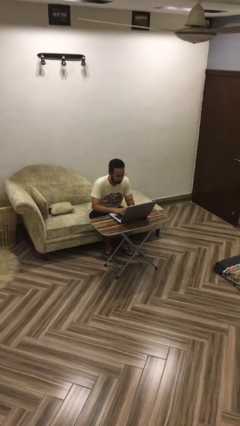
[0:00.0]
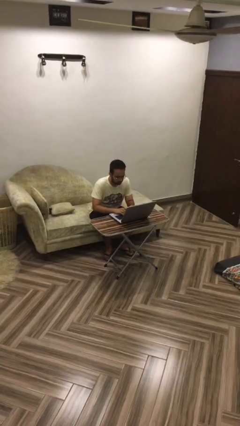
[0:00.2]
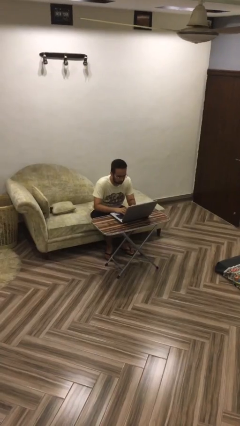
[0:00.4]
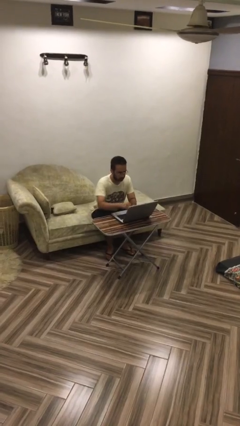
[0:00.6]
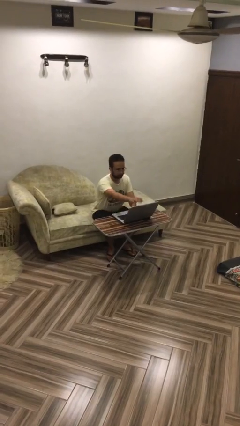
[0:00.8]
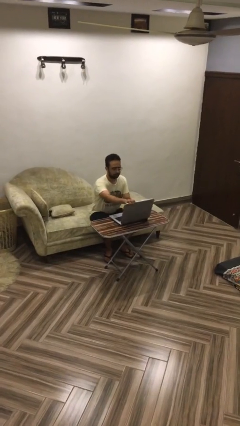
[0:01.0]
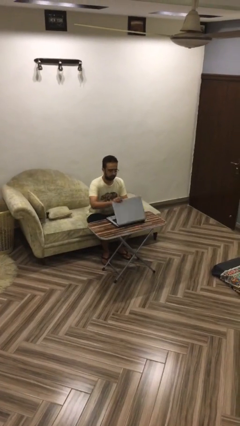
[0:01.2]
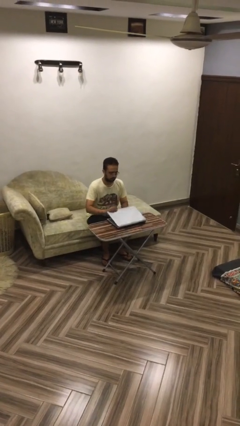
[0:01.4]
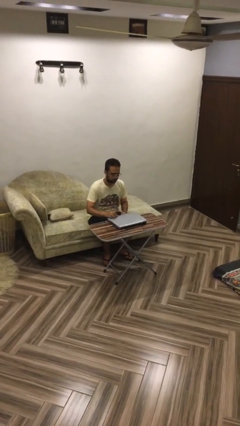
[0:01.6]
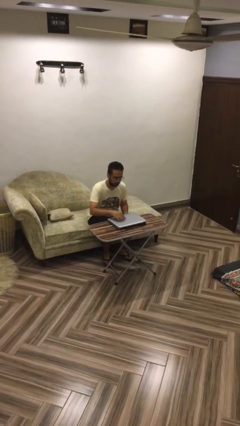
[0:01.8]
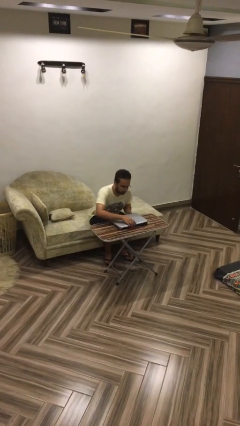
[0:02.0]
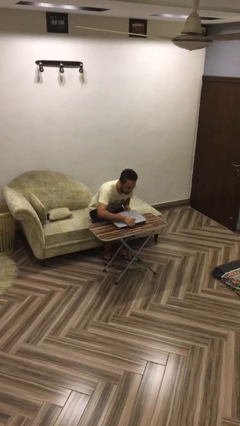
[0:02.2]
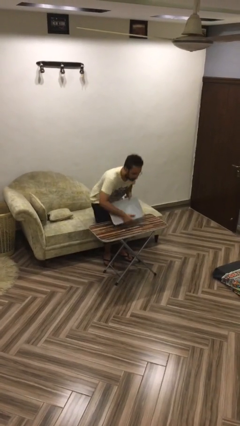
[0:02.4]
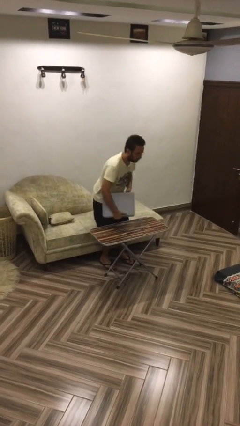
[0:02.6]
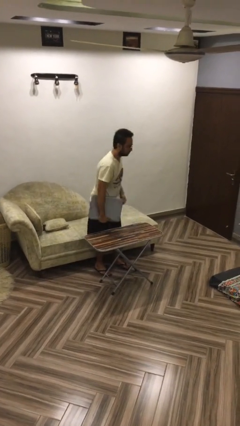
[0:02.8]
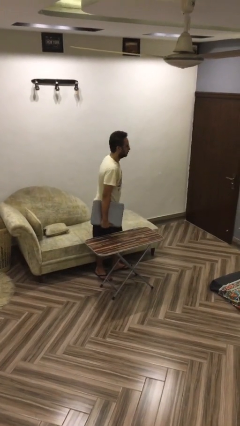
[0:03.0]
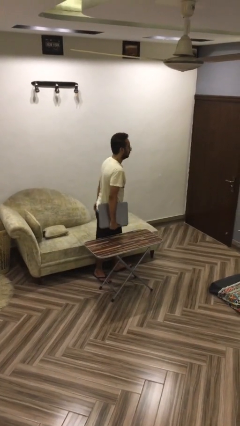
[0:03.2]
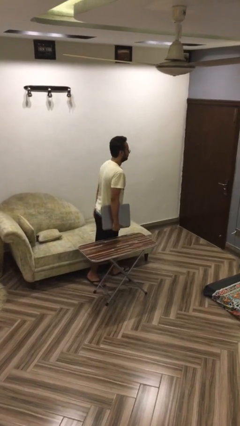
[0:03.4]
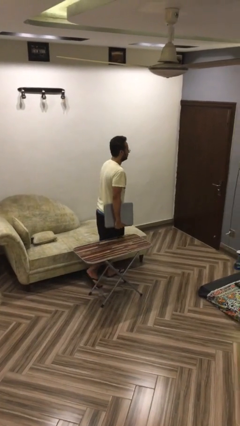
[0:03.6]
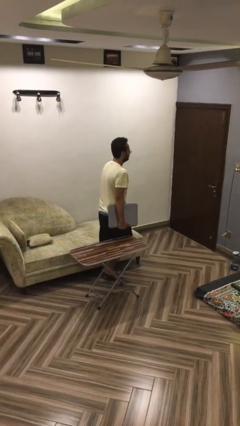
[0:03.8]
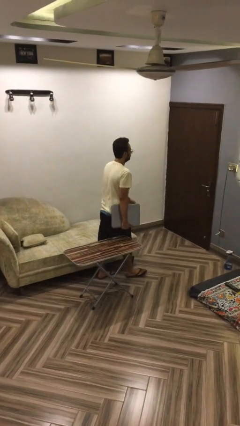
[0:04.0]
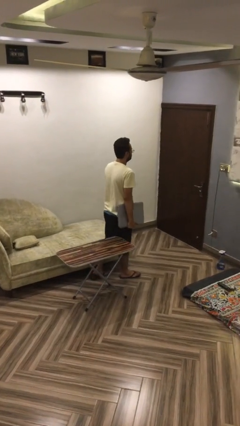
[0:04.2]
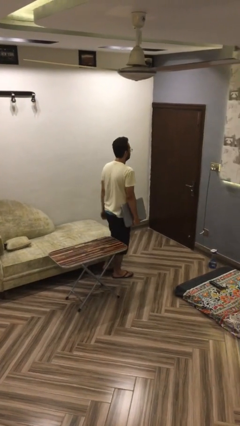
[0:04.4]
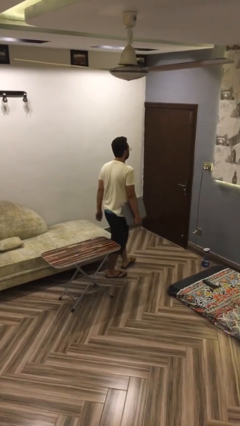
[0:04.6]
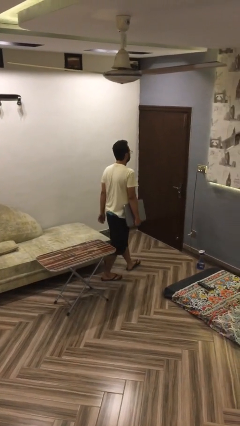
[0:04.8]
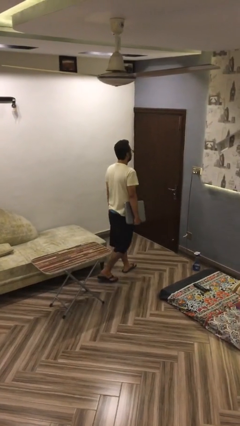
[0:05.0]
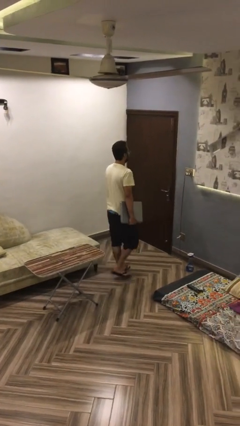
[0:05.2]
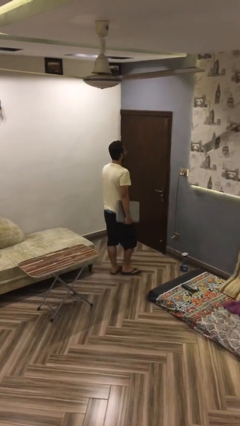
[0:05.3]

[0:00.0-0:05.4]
person stands up

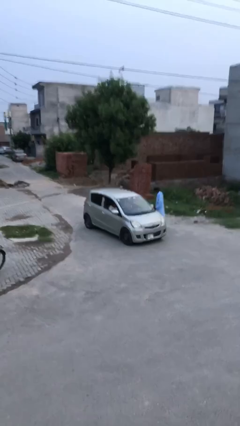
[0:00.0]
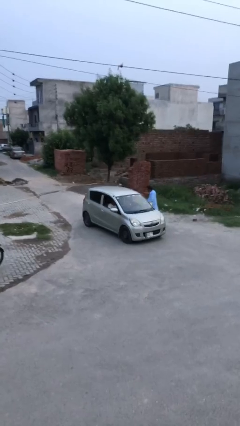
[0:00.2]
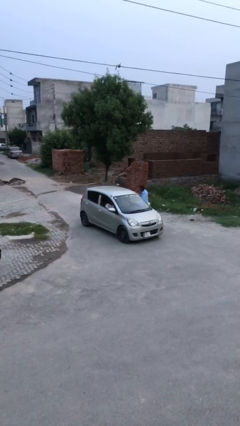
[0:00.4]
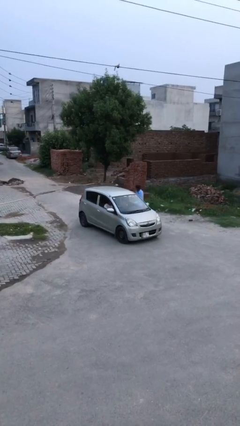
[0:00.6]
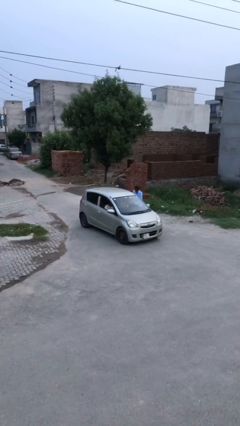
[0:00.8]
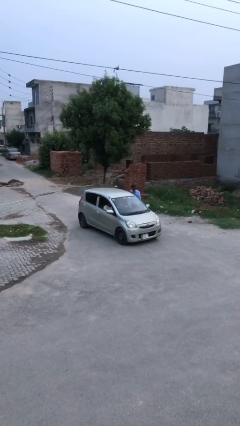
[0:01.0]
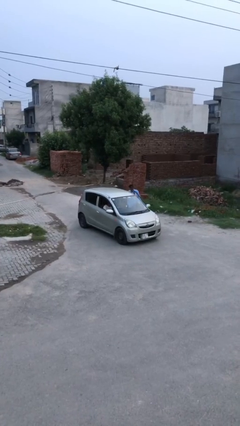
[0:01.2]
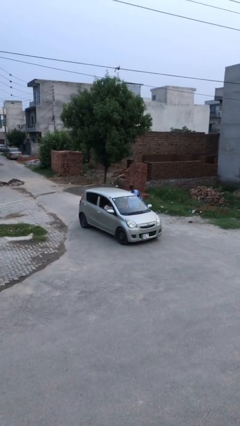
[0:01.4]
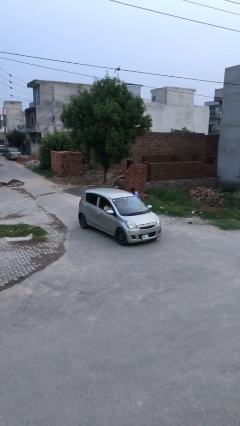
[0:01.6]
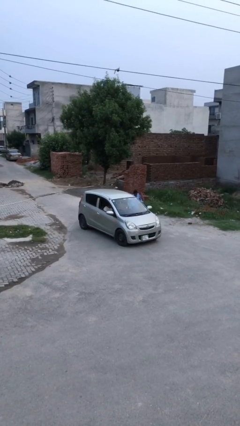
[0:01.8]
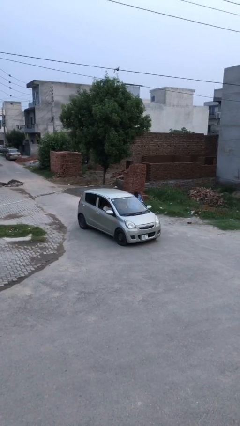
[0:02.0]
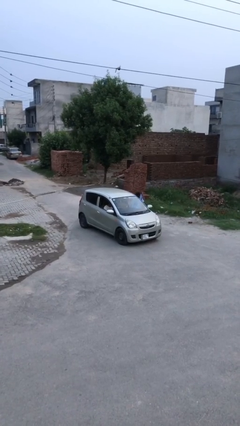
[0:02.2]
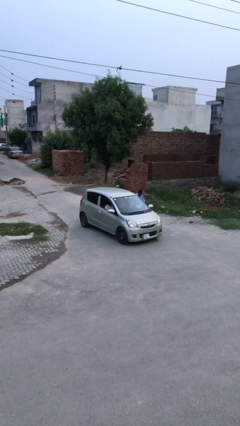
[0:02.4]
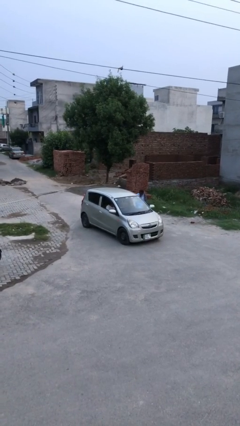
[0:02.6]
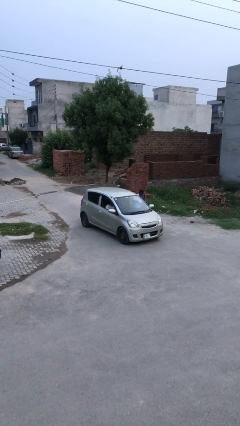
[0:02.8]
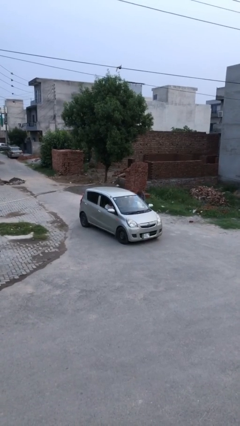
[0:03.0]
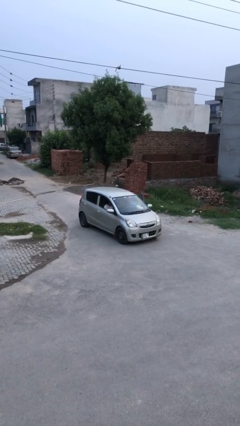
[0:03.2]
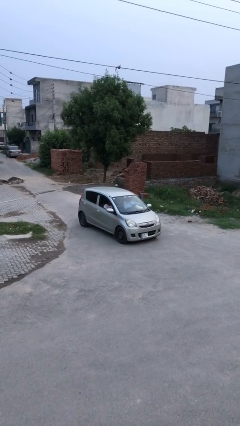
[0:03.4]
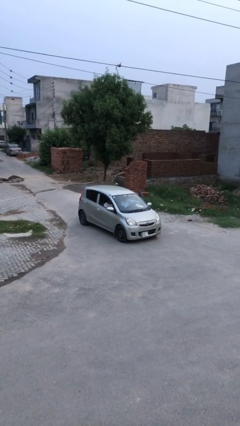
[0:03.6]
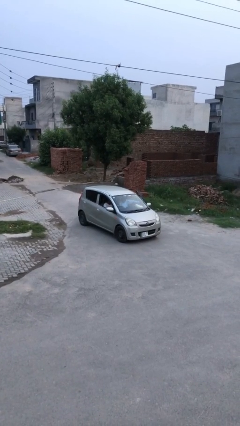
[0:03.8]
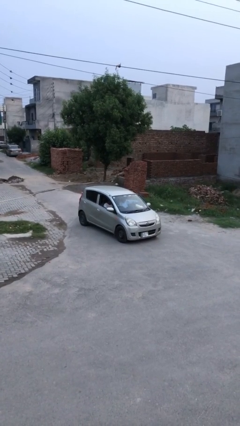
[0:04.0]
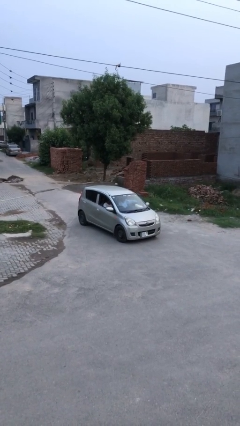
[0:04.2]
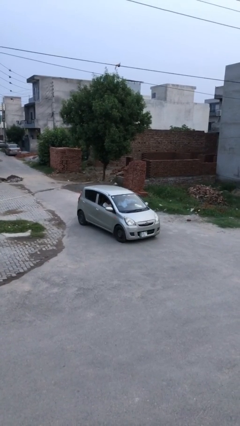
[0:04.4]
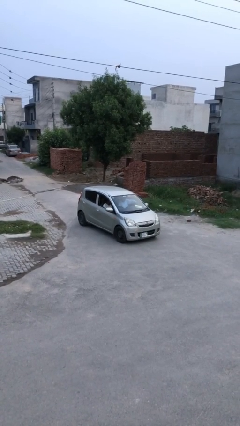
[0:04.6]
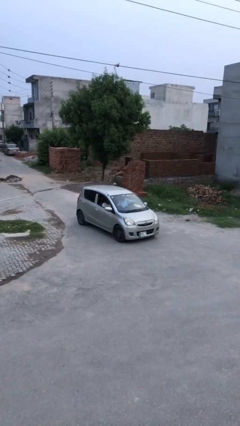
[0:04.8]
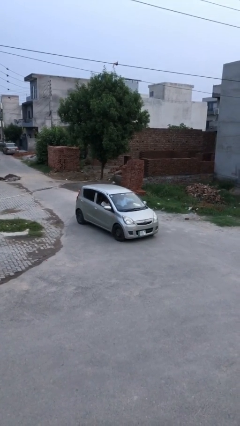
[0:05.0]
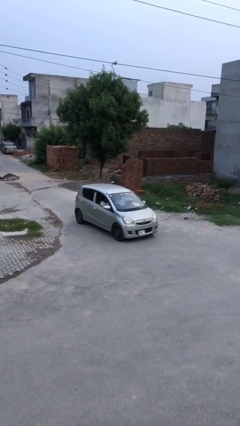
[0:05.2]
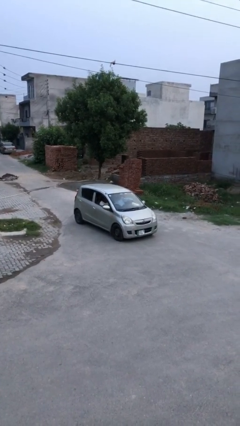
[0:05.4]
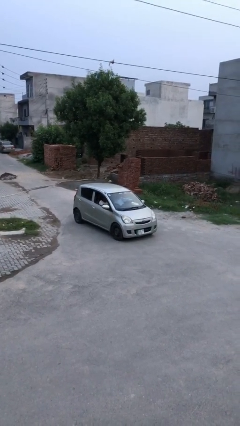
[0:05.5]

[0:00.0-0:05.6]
car picks up person

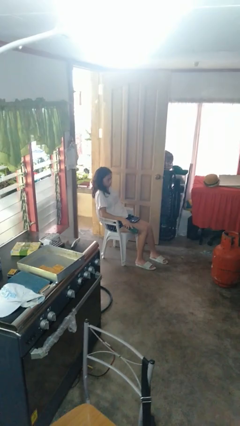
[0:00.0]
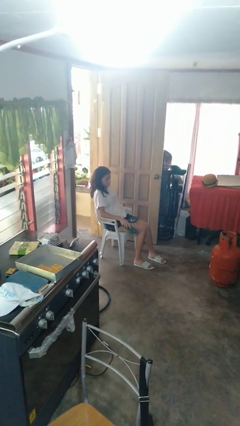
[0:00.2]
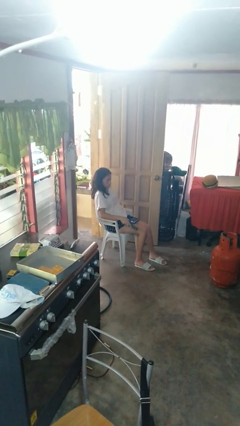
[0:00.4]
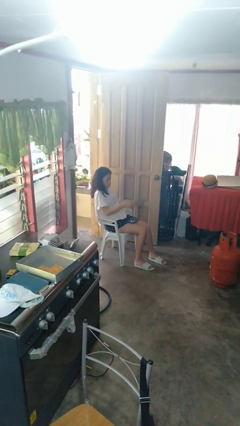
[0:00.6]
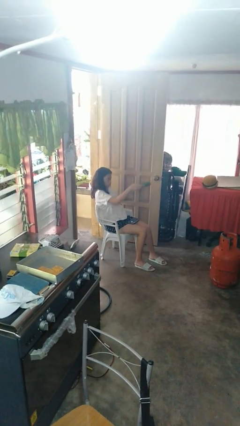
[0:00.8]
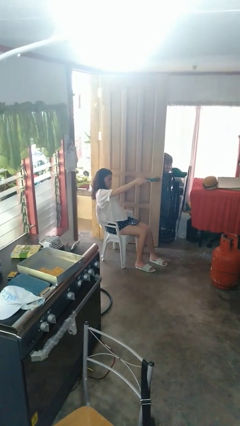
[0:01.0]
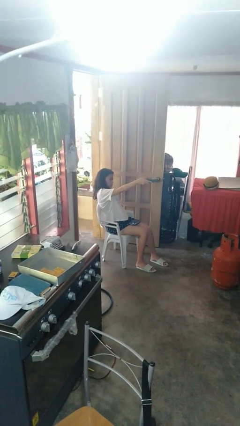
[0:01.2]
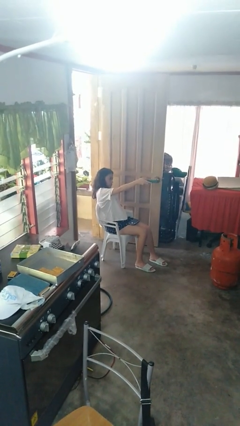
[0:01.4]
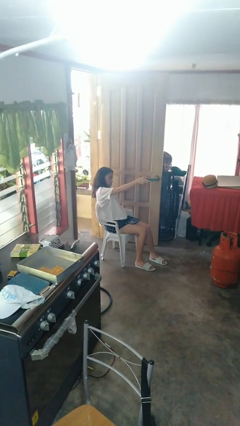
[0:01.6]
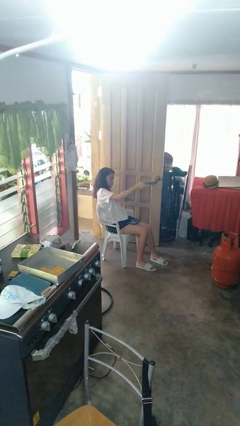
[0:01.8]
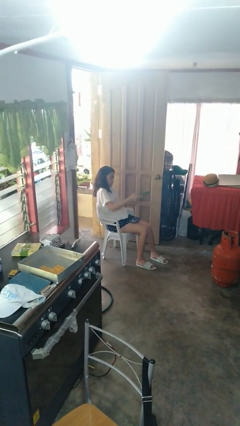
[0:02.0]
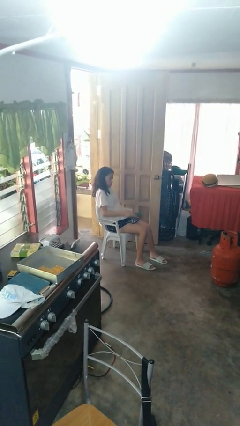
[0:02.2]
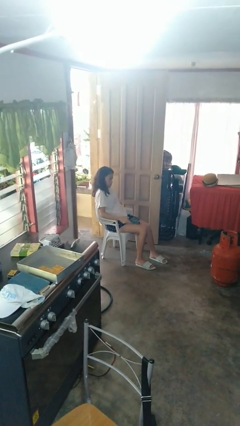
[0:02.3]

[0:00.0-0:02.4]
person uses television remote

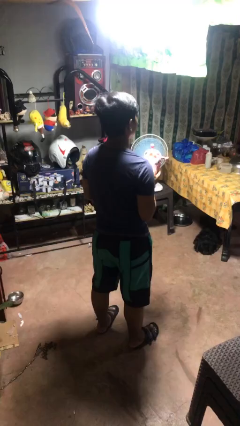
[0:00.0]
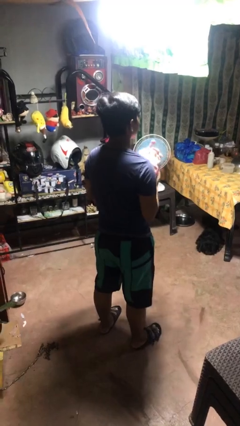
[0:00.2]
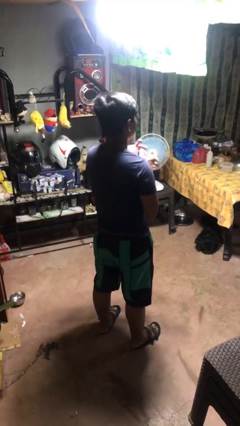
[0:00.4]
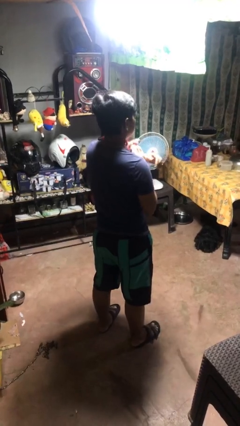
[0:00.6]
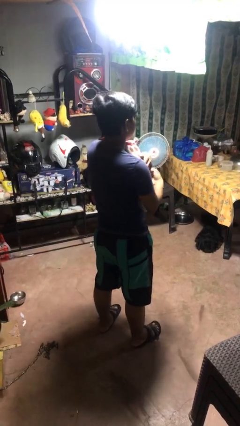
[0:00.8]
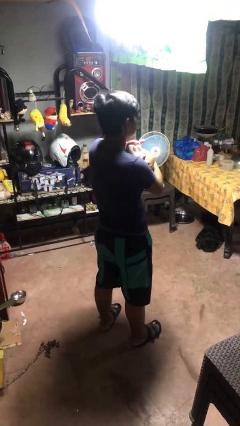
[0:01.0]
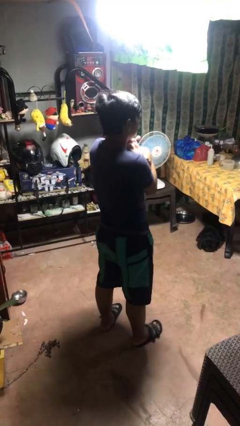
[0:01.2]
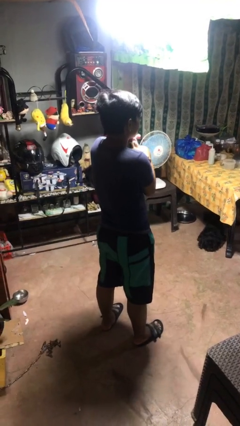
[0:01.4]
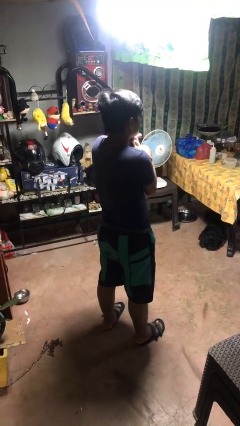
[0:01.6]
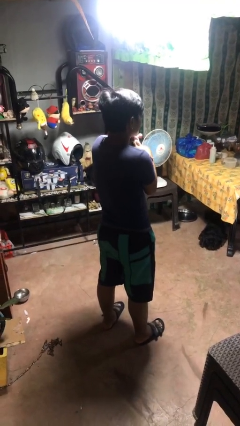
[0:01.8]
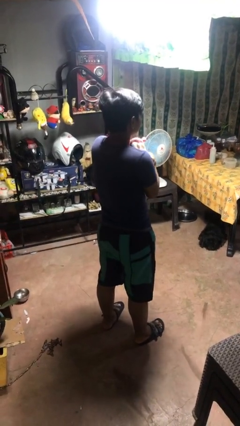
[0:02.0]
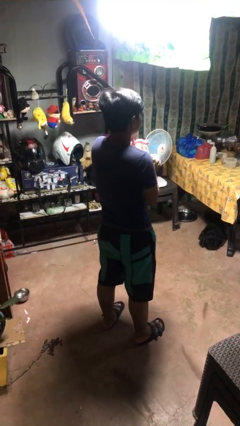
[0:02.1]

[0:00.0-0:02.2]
person hugs stuffed animal

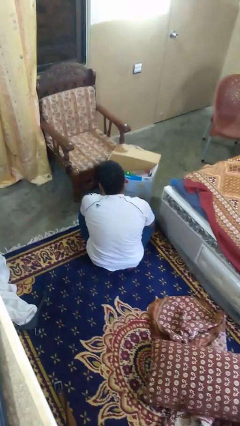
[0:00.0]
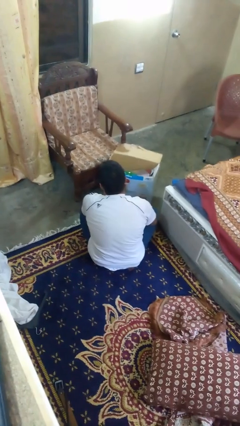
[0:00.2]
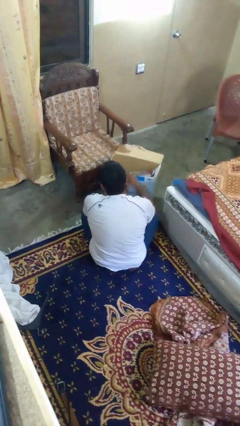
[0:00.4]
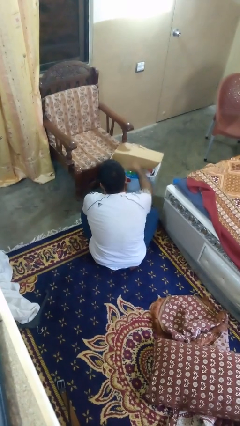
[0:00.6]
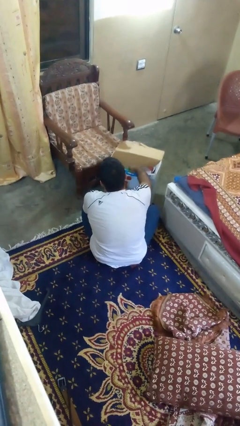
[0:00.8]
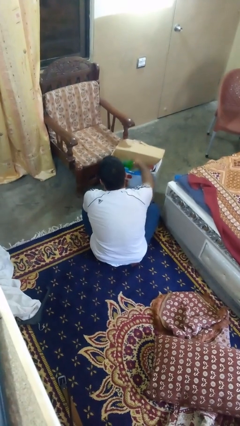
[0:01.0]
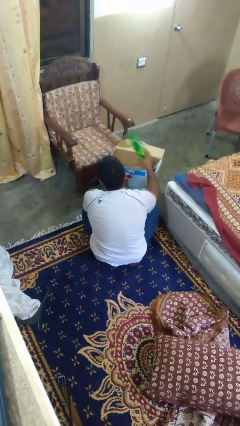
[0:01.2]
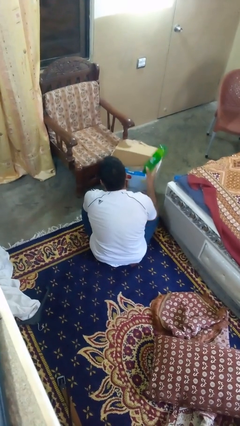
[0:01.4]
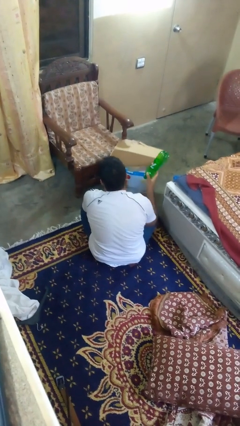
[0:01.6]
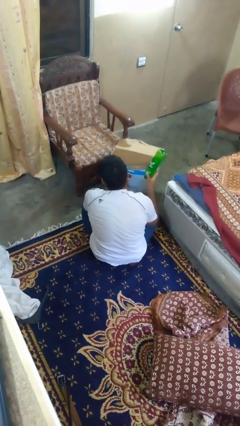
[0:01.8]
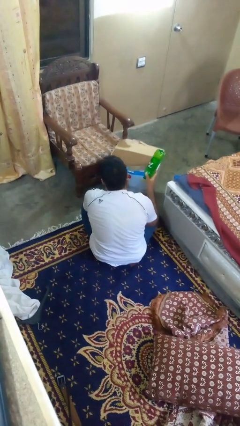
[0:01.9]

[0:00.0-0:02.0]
person takes object from box
